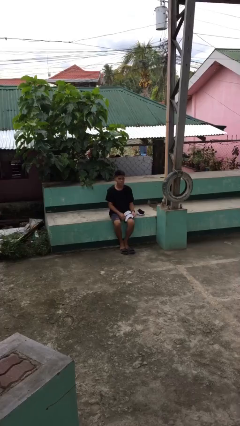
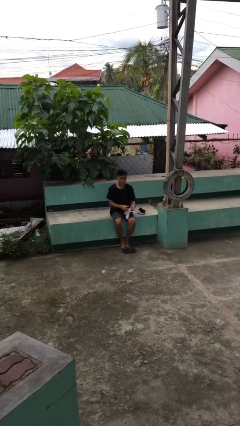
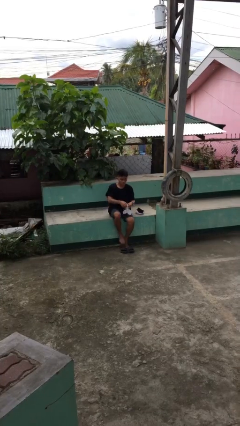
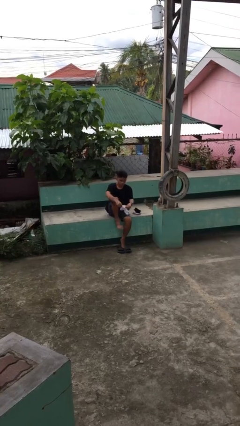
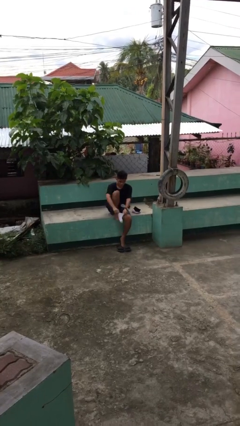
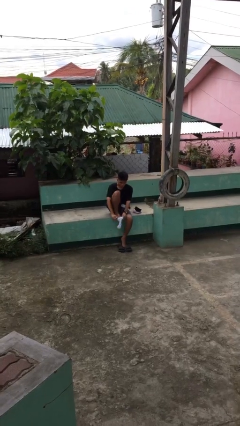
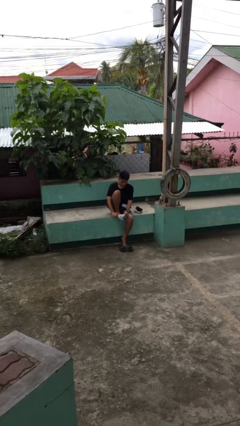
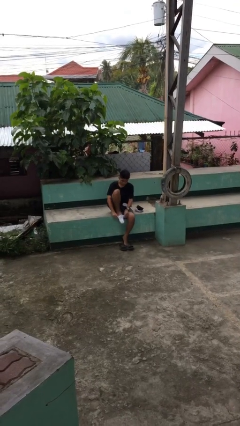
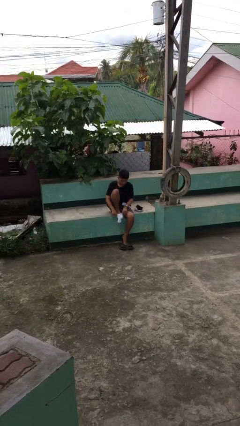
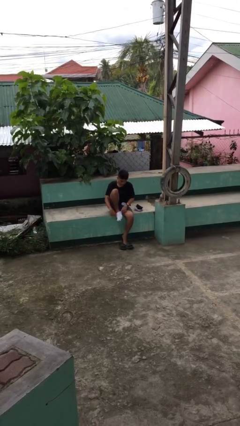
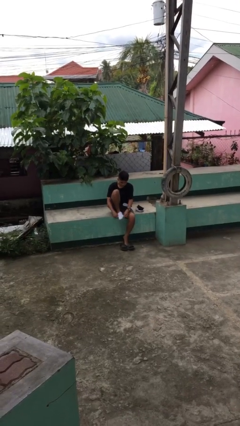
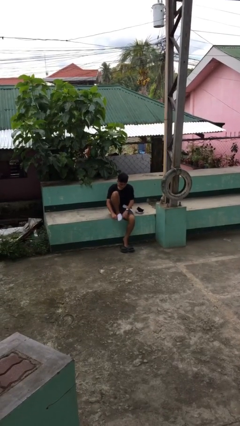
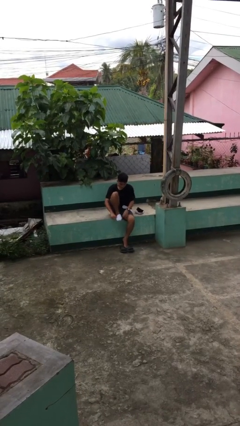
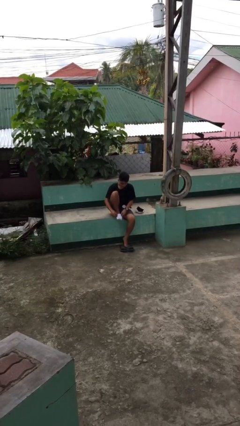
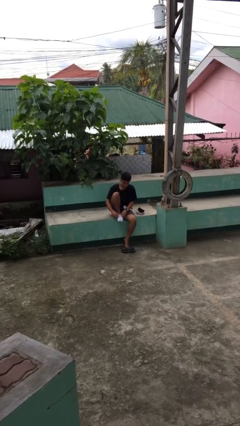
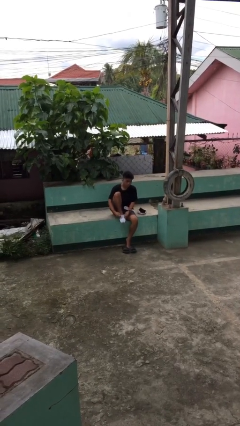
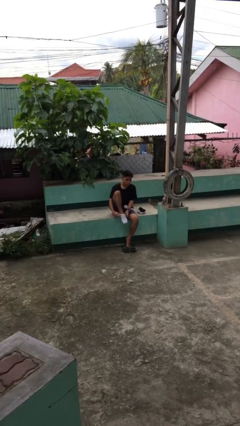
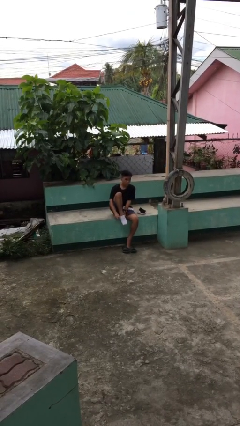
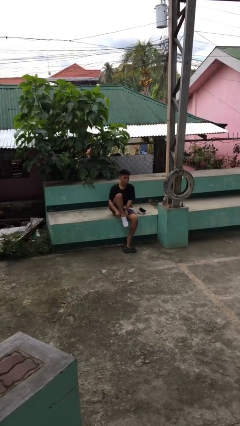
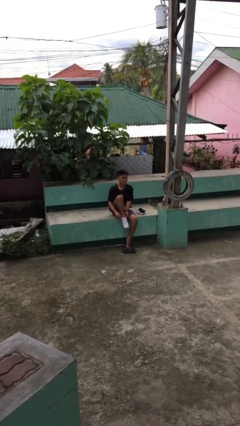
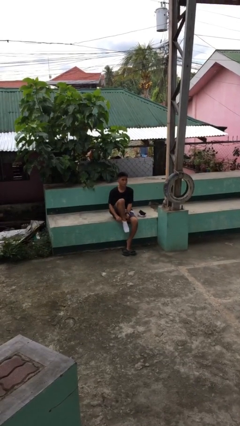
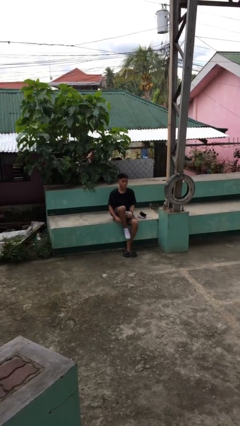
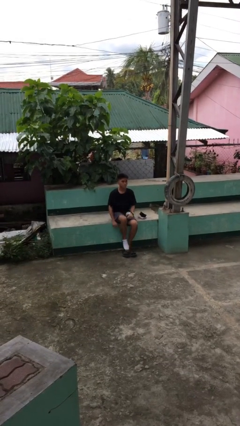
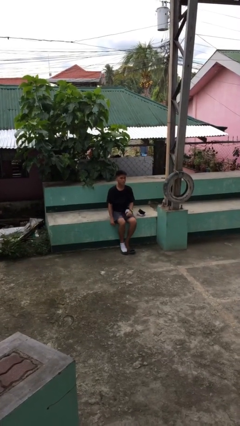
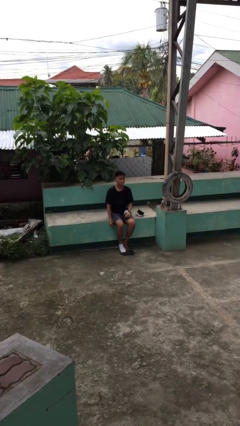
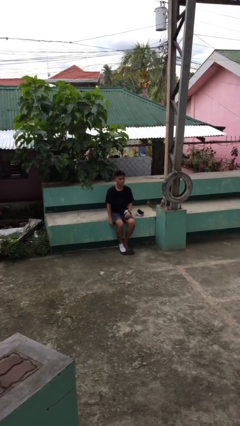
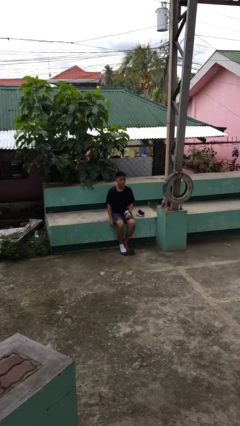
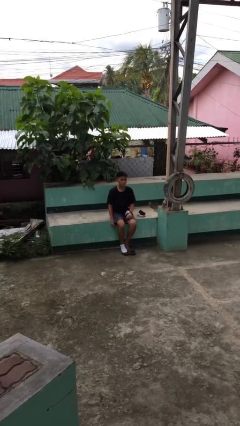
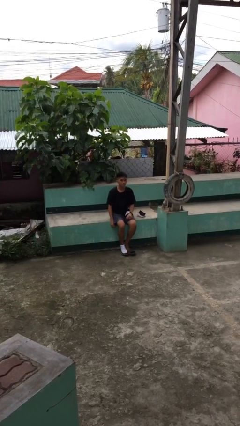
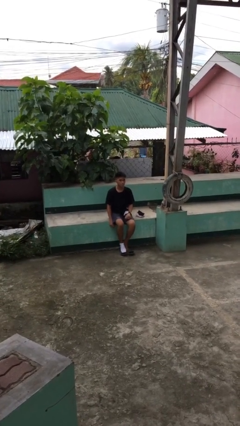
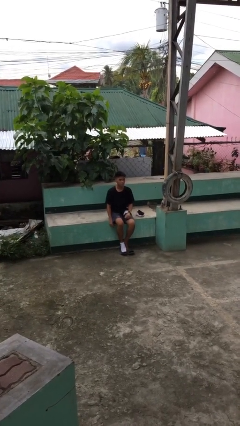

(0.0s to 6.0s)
person puts on socks

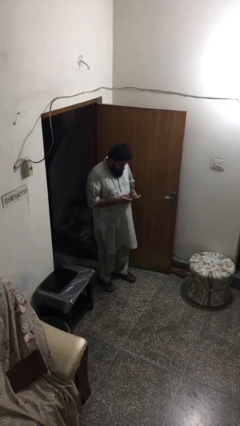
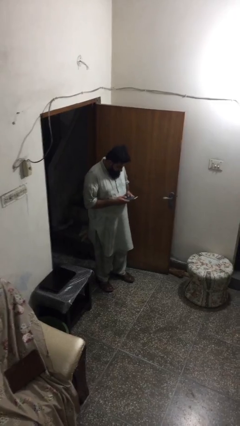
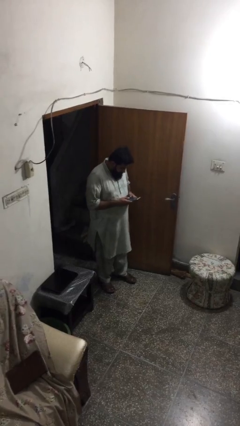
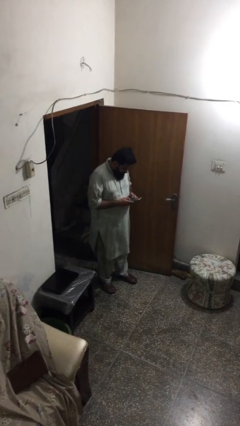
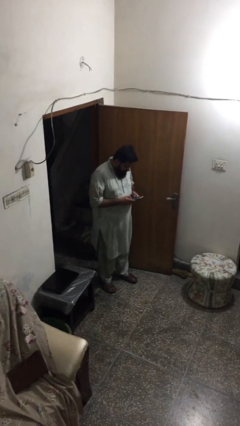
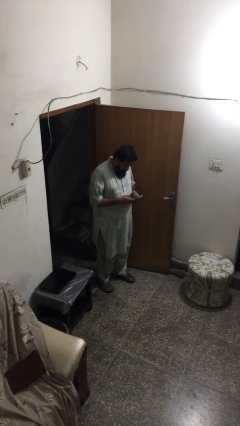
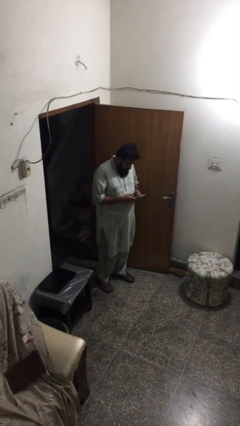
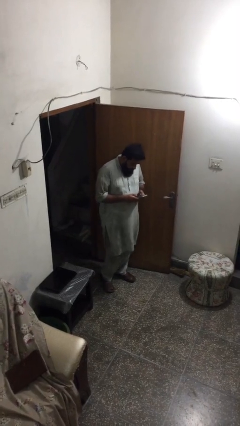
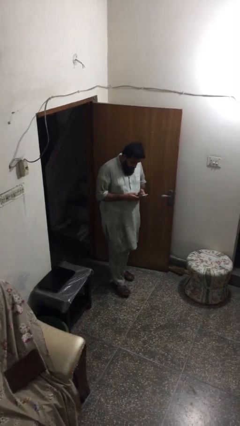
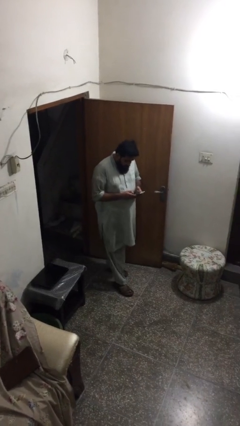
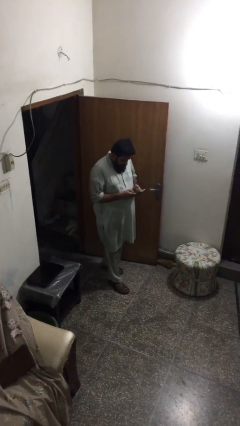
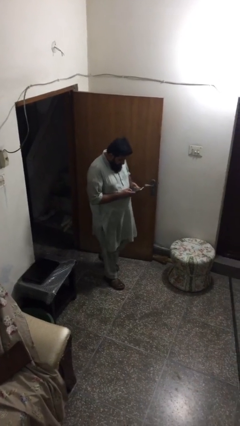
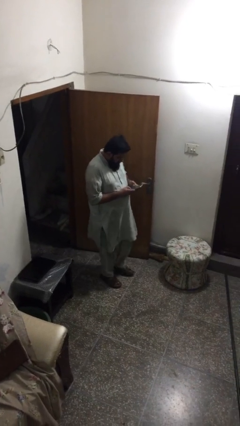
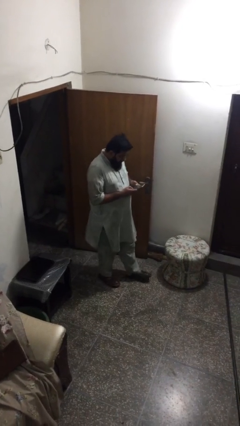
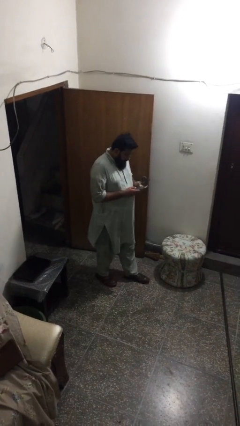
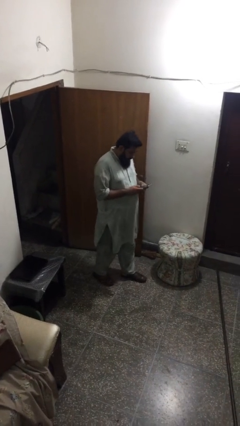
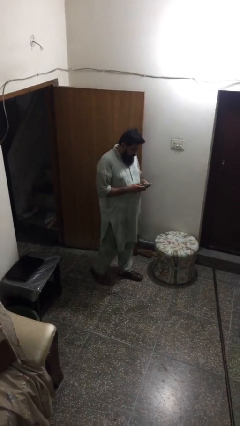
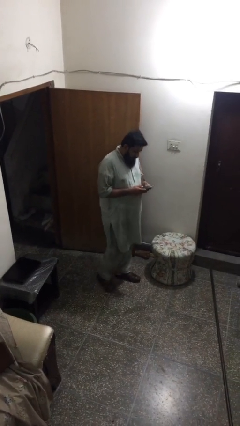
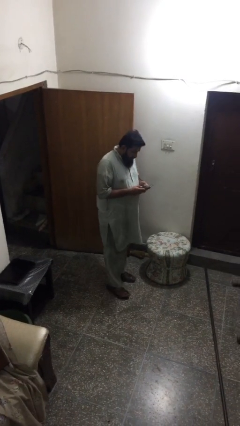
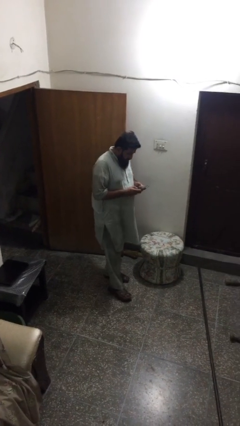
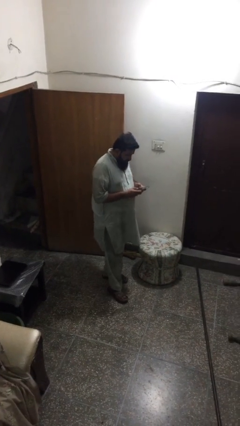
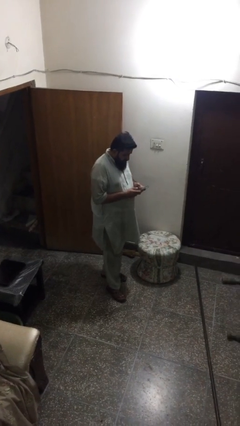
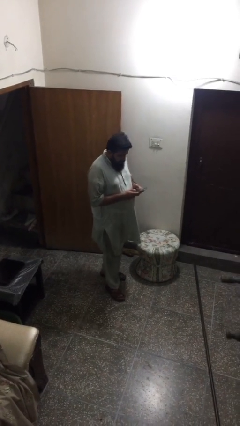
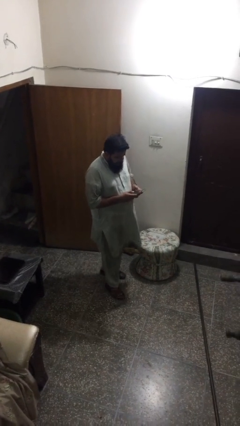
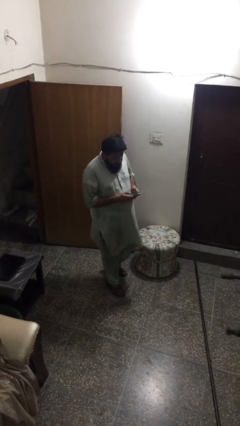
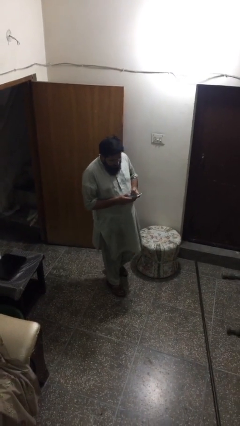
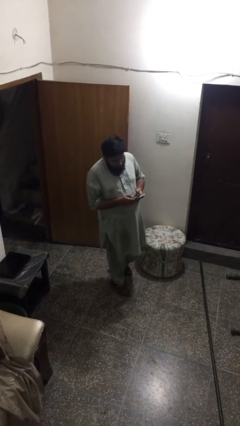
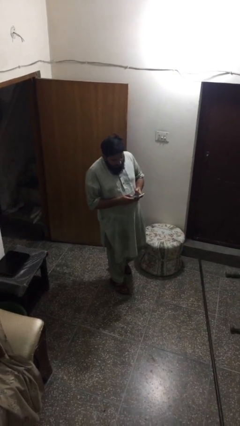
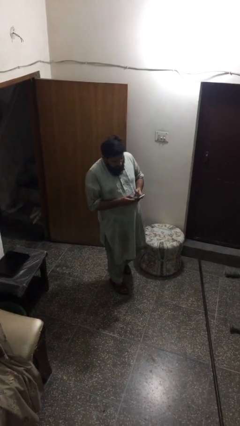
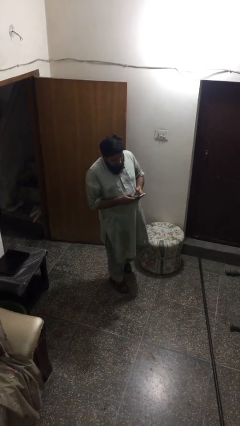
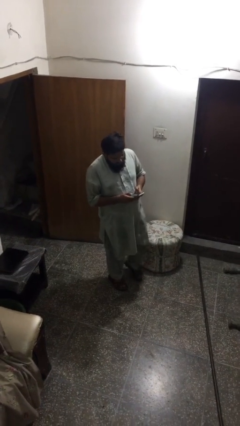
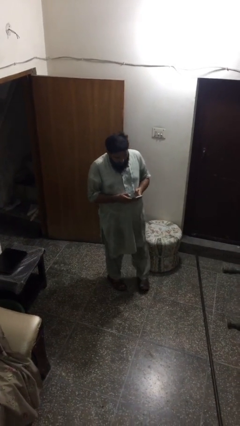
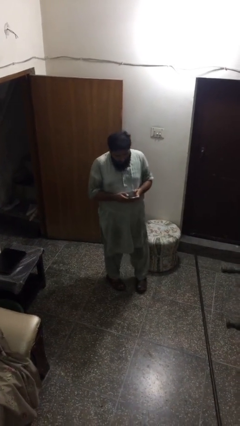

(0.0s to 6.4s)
person texts on phone

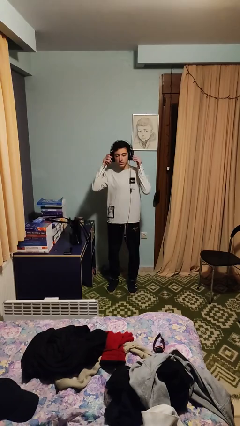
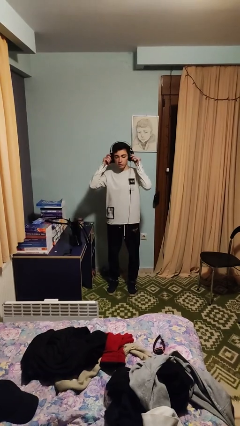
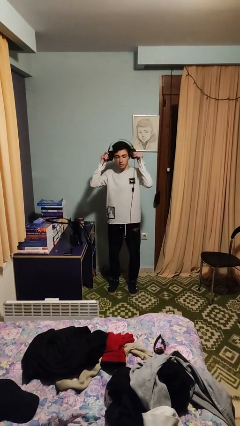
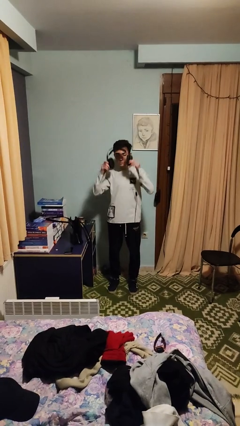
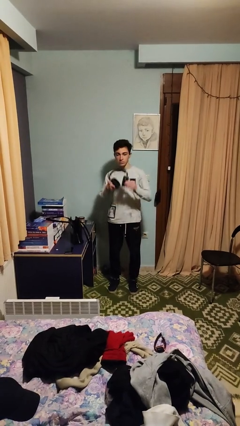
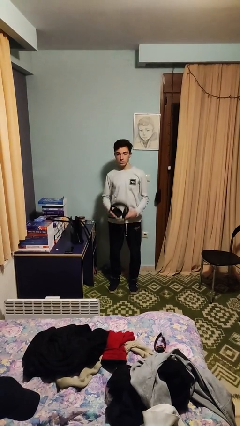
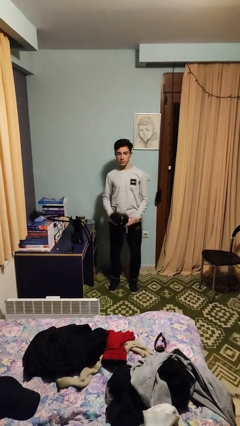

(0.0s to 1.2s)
person takes off headphones

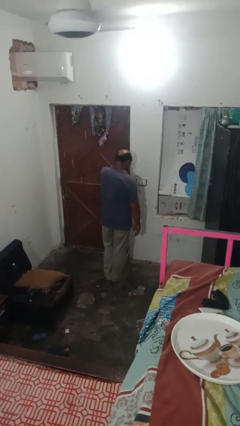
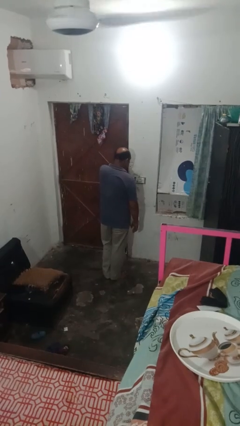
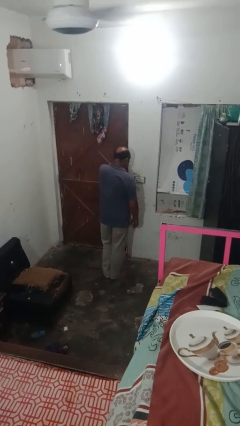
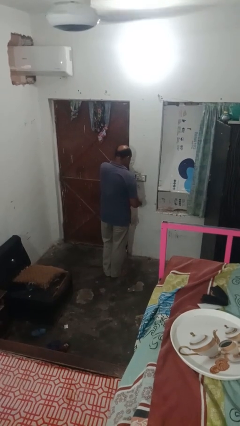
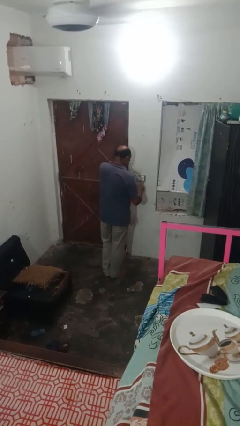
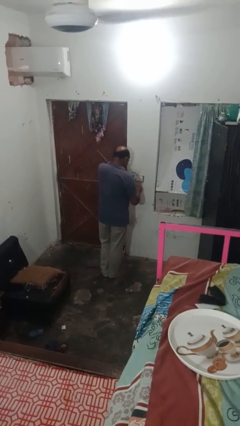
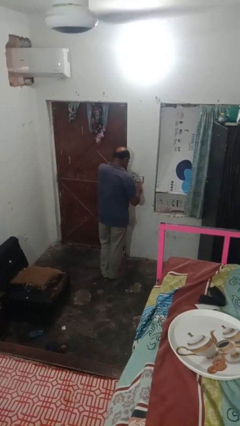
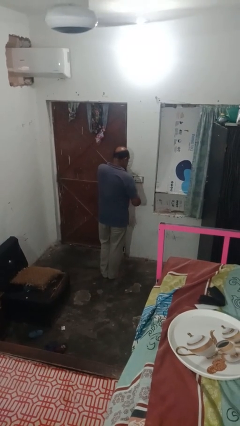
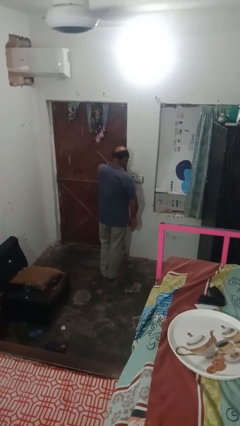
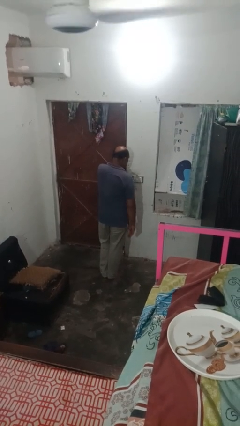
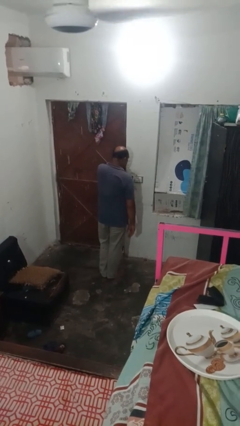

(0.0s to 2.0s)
person turns off fan

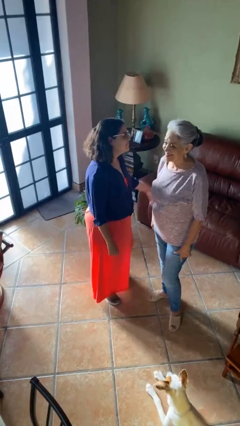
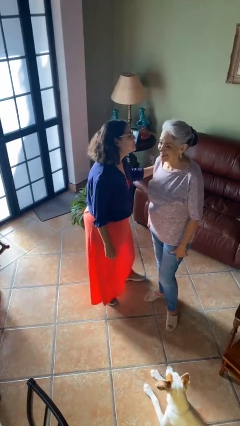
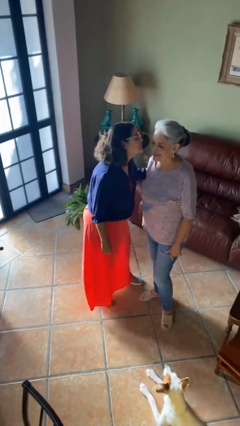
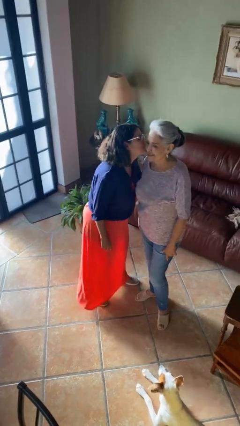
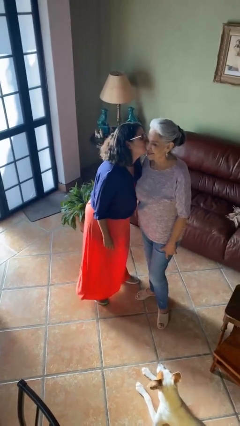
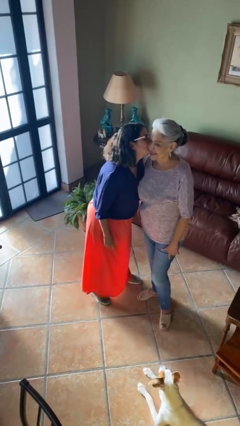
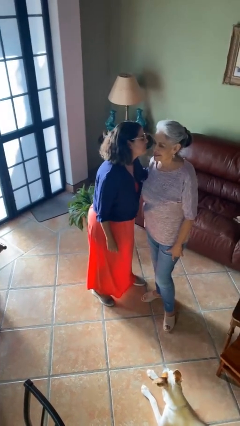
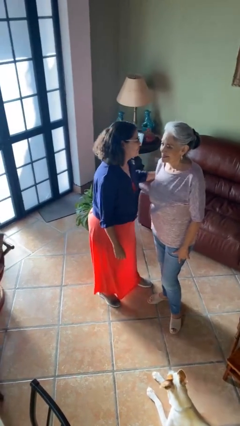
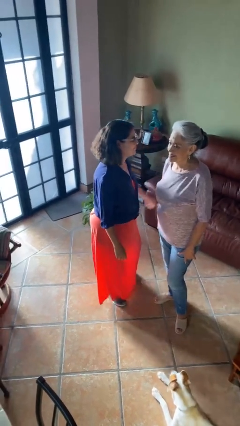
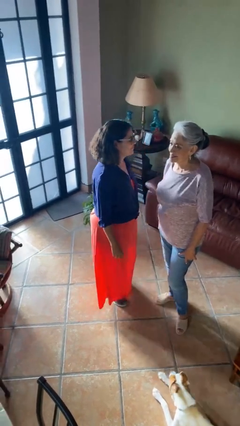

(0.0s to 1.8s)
person kisses cheek of person
